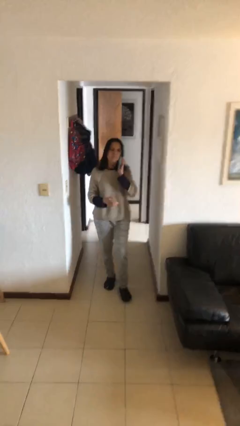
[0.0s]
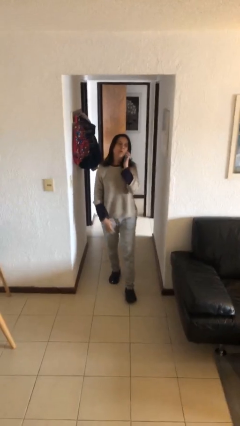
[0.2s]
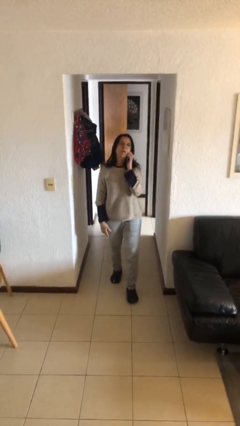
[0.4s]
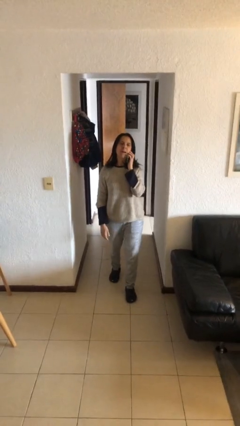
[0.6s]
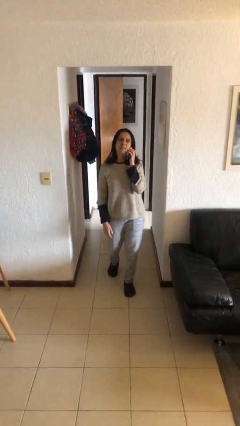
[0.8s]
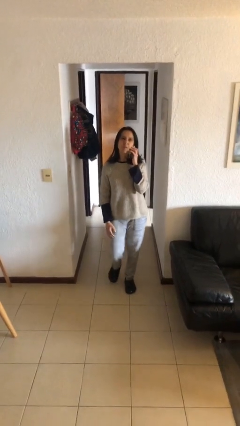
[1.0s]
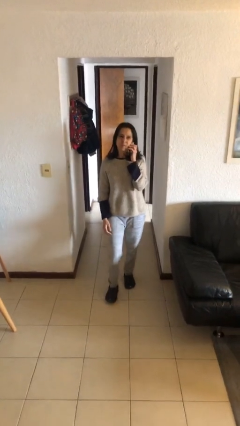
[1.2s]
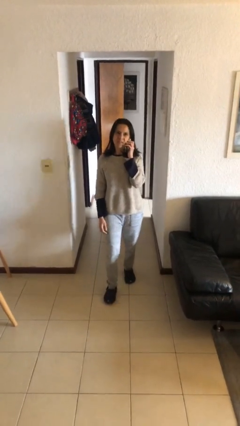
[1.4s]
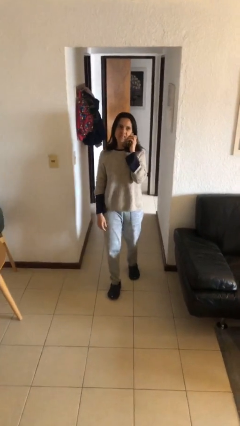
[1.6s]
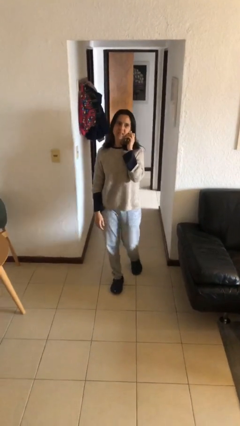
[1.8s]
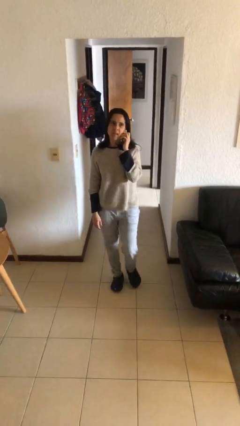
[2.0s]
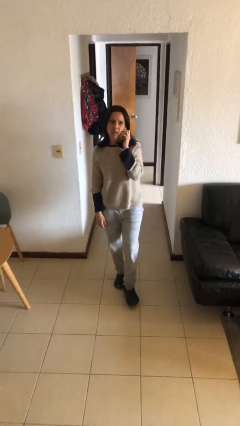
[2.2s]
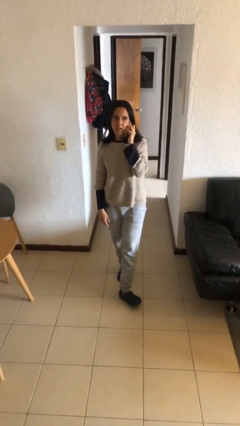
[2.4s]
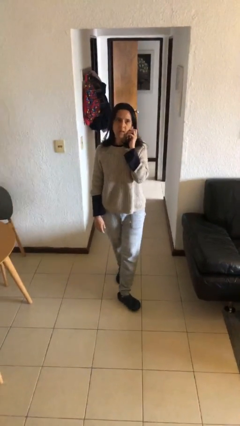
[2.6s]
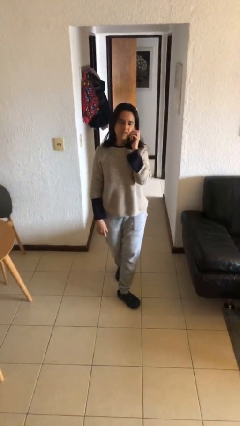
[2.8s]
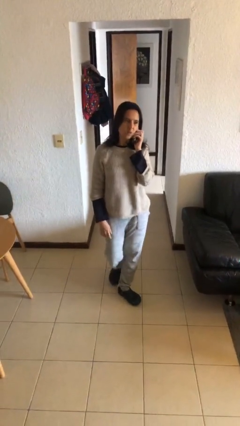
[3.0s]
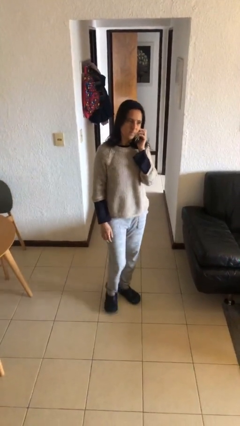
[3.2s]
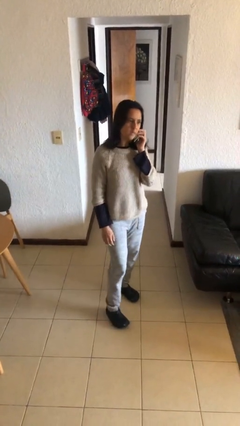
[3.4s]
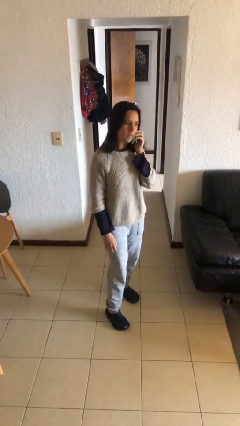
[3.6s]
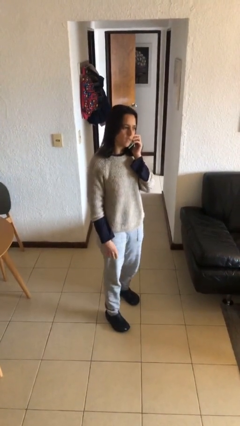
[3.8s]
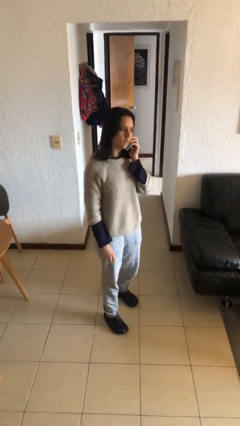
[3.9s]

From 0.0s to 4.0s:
person talks on phone

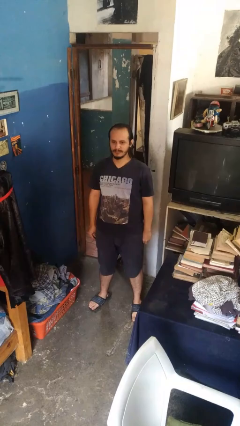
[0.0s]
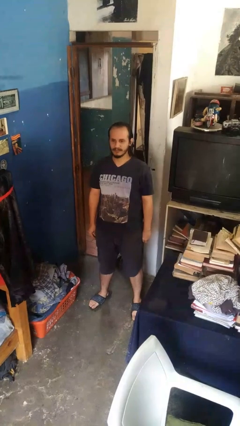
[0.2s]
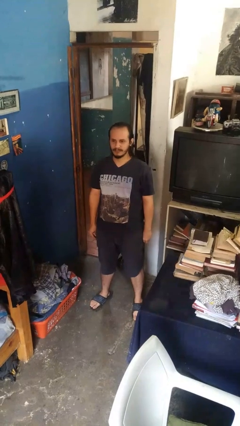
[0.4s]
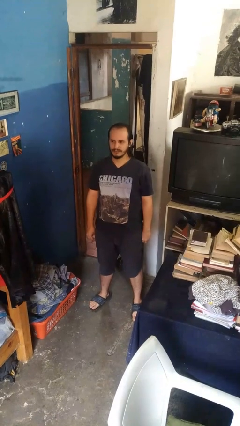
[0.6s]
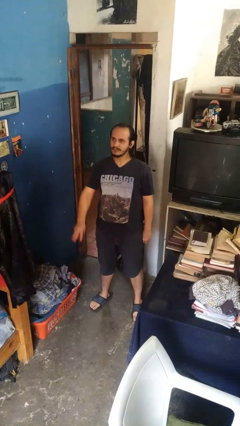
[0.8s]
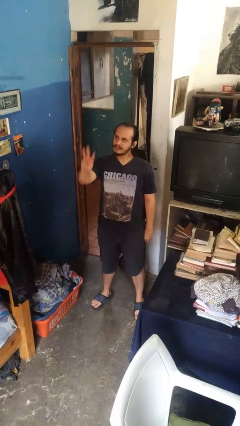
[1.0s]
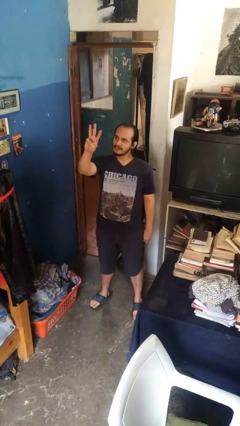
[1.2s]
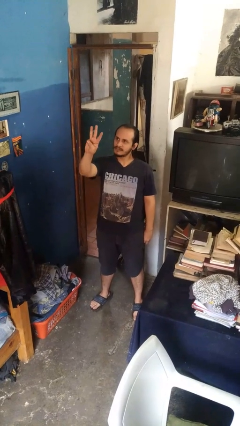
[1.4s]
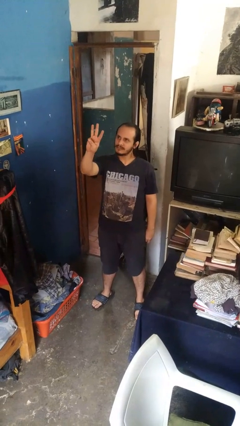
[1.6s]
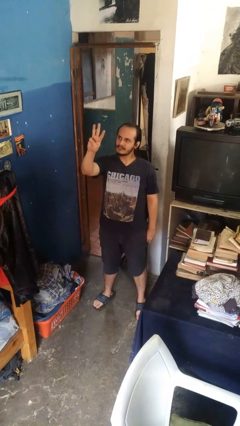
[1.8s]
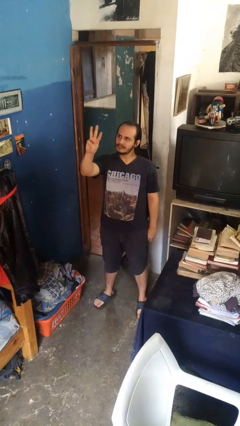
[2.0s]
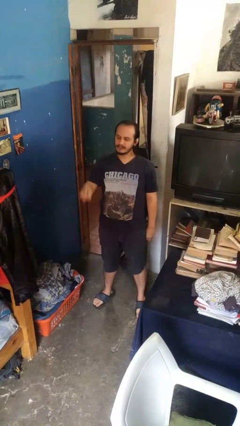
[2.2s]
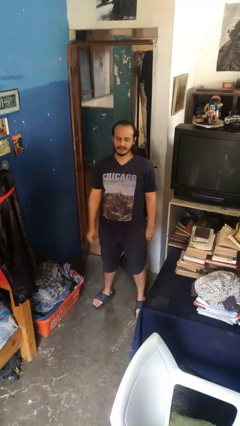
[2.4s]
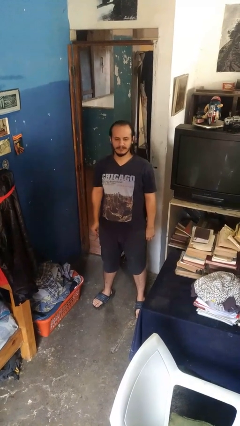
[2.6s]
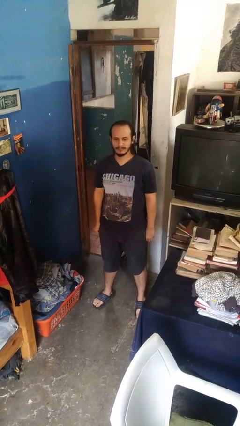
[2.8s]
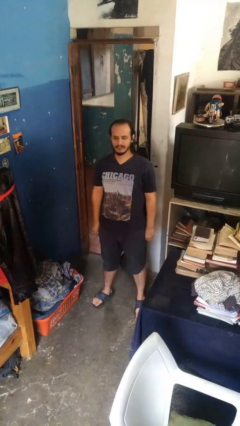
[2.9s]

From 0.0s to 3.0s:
person gestures number three

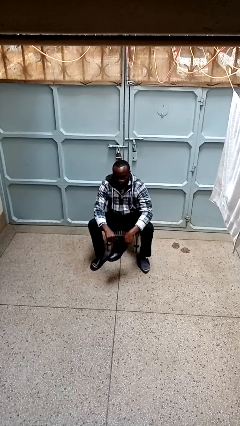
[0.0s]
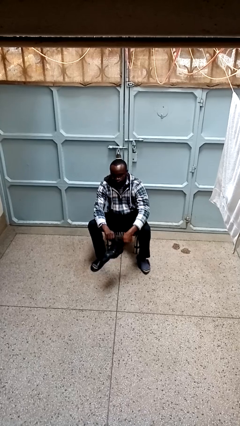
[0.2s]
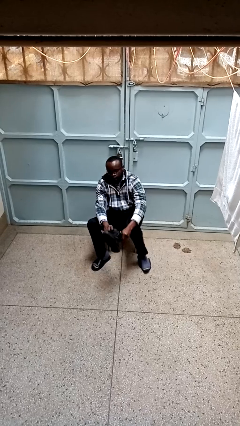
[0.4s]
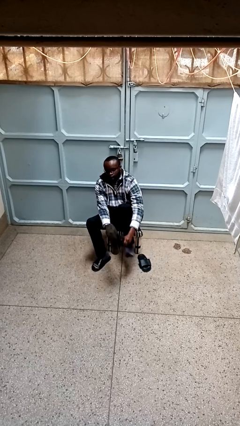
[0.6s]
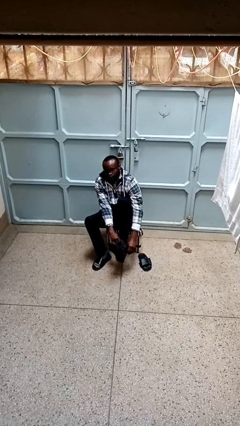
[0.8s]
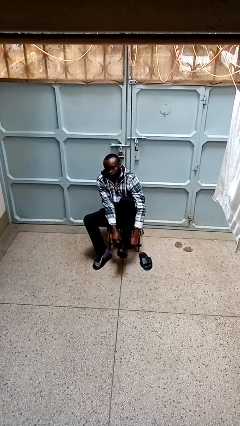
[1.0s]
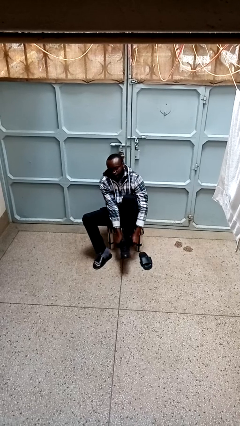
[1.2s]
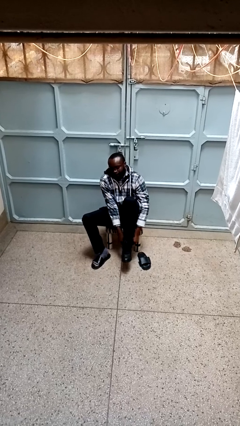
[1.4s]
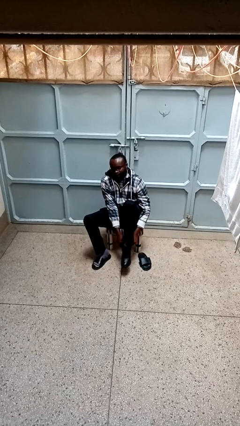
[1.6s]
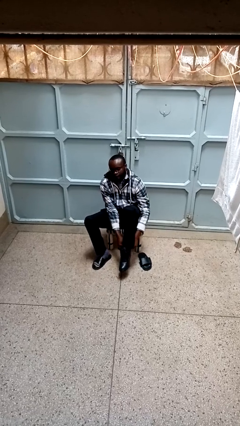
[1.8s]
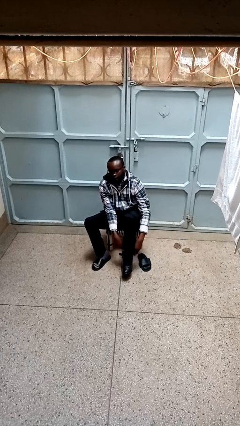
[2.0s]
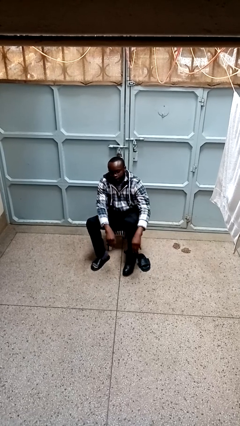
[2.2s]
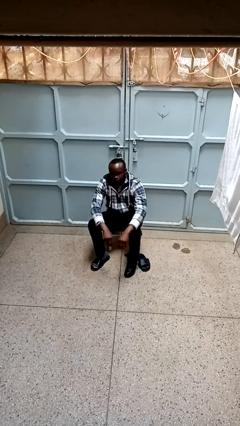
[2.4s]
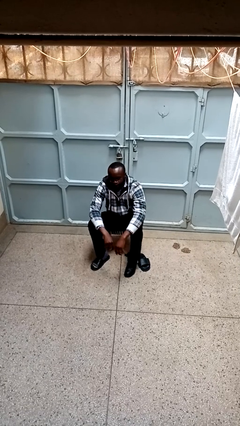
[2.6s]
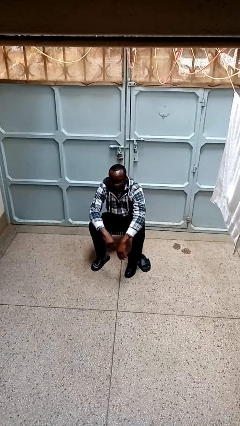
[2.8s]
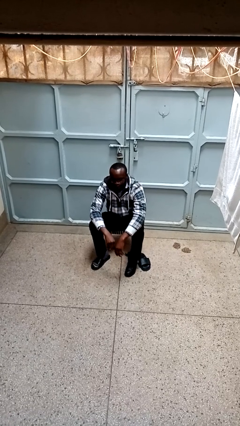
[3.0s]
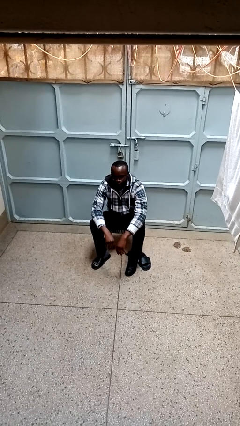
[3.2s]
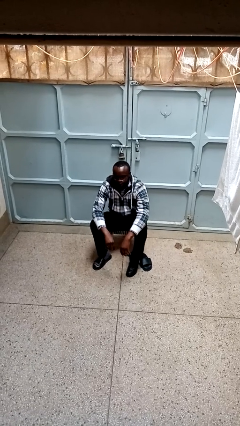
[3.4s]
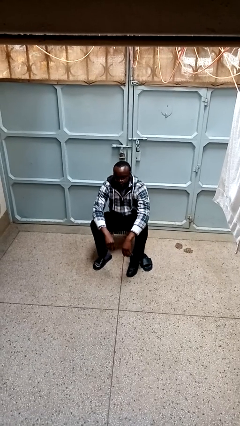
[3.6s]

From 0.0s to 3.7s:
person puts on boots

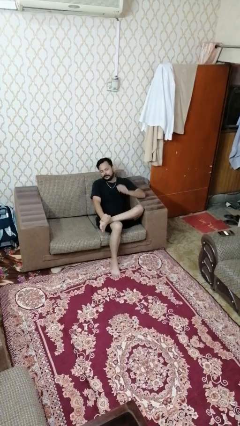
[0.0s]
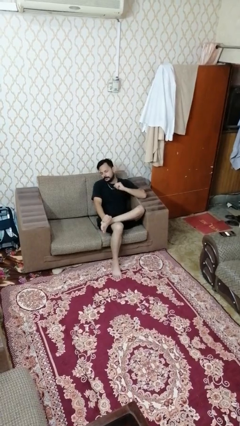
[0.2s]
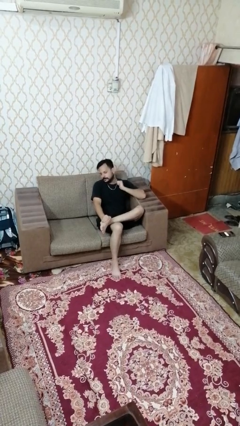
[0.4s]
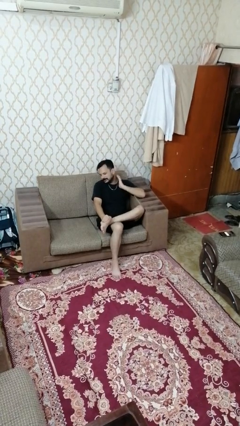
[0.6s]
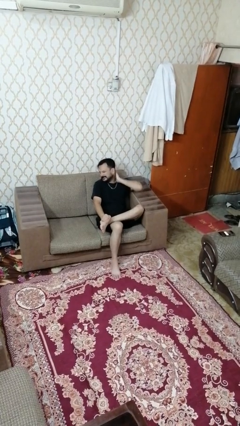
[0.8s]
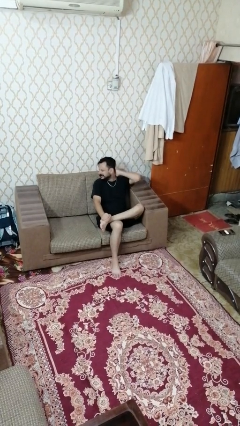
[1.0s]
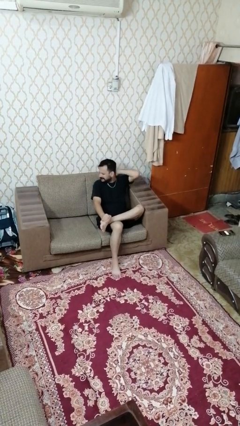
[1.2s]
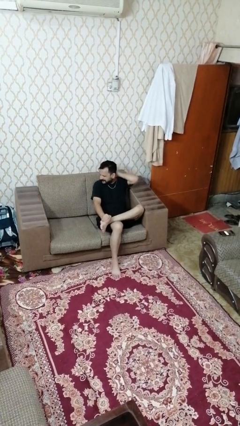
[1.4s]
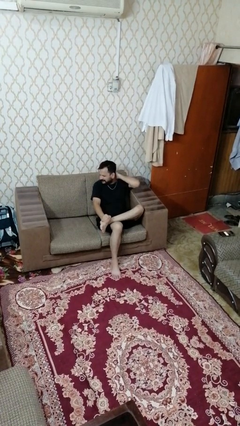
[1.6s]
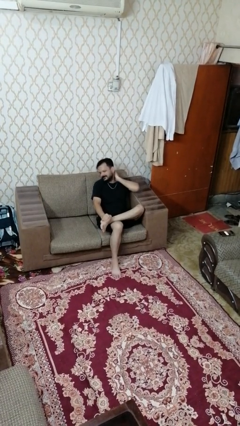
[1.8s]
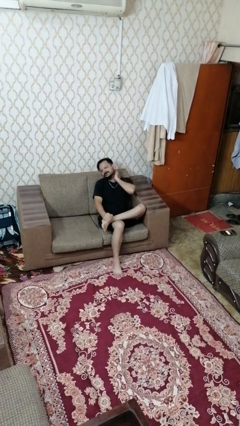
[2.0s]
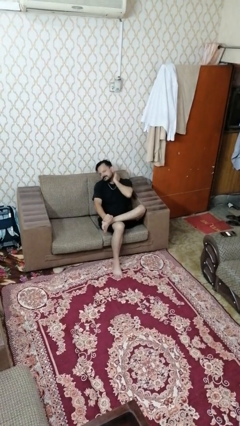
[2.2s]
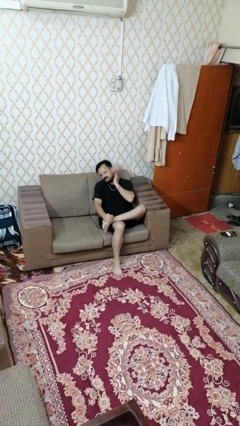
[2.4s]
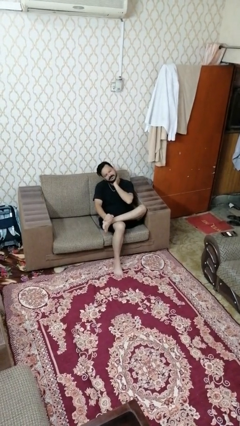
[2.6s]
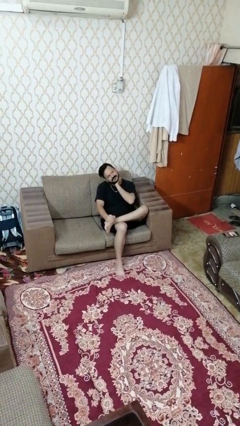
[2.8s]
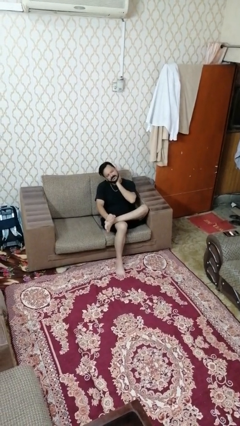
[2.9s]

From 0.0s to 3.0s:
person rubs neck

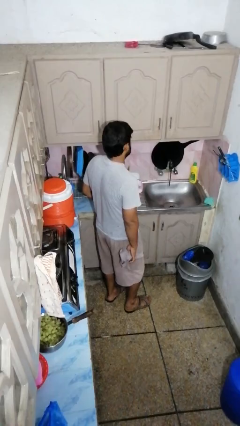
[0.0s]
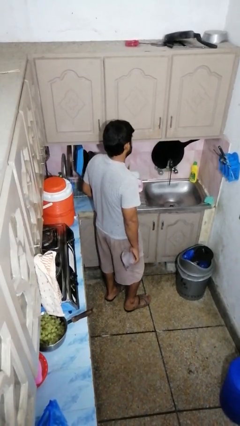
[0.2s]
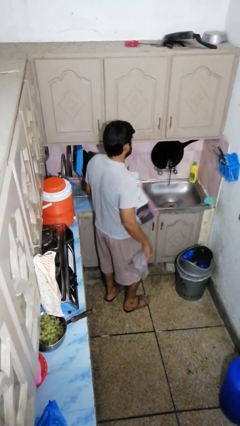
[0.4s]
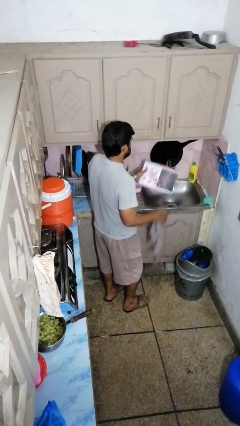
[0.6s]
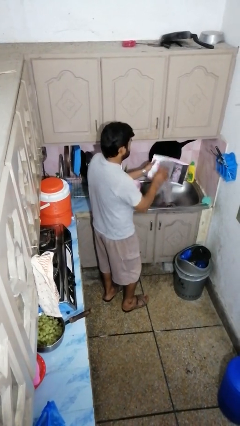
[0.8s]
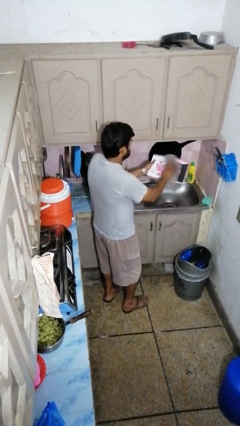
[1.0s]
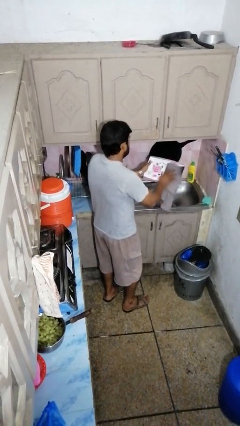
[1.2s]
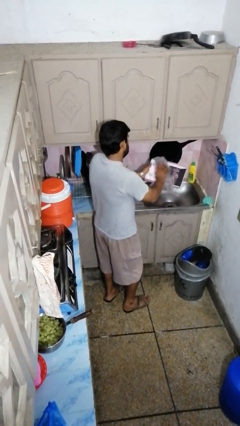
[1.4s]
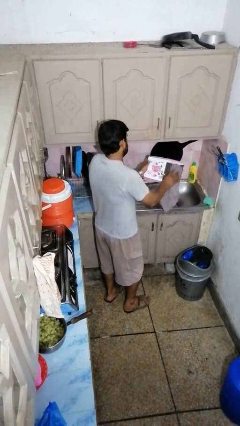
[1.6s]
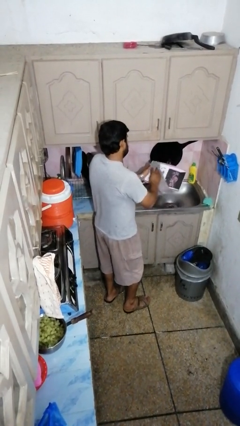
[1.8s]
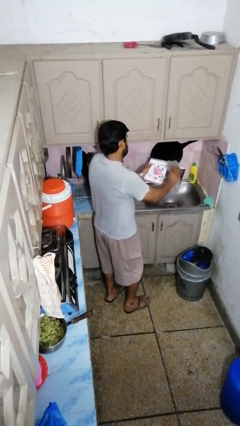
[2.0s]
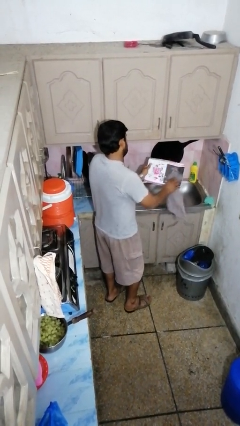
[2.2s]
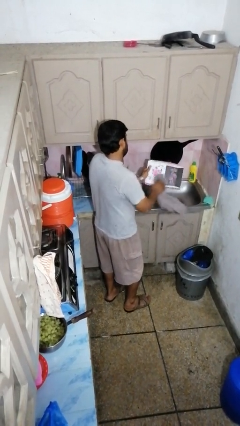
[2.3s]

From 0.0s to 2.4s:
person dries dish

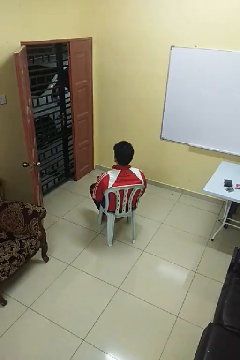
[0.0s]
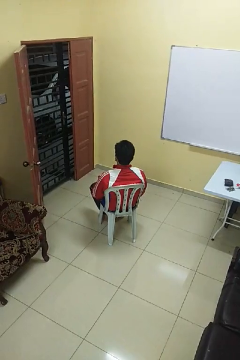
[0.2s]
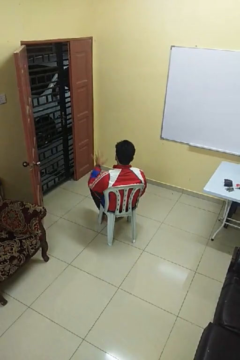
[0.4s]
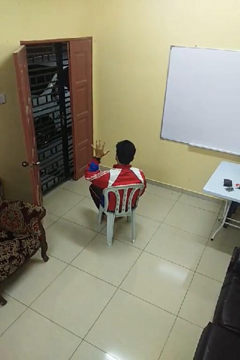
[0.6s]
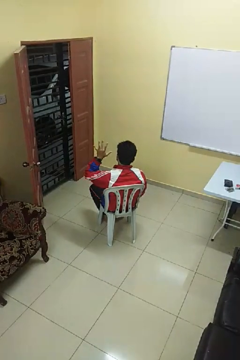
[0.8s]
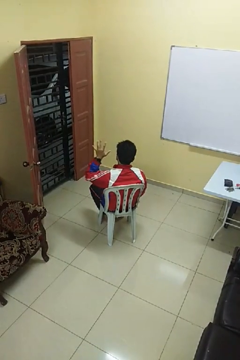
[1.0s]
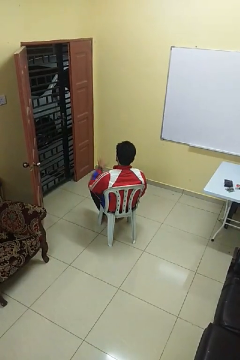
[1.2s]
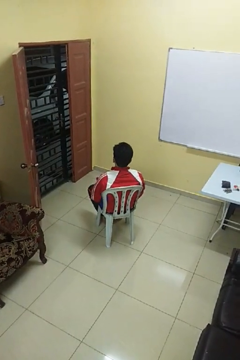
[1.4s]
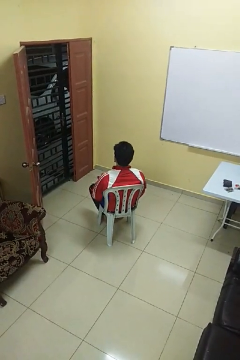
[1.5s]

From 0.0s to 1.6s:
person gestures number five
